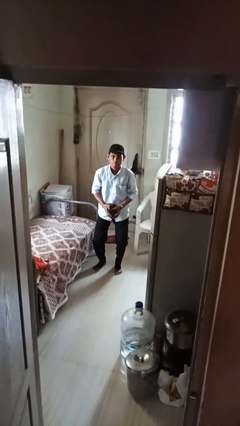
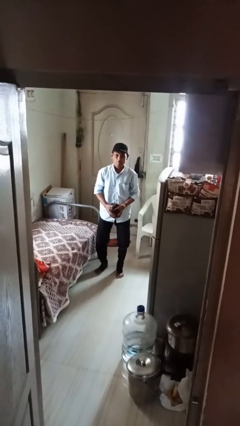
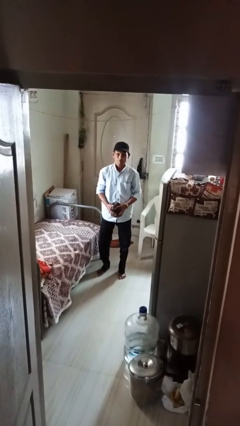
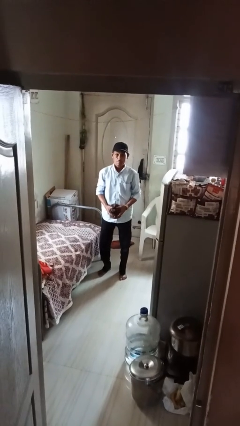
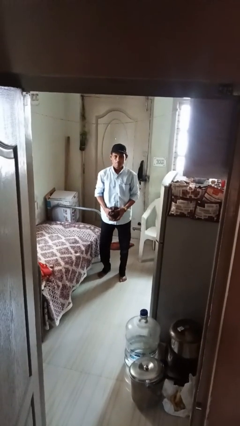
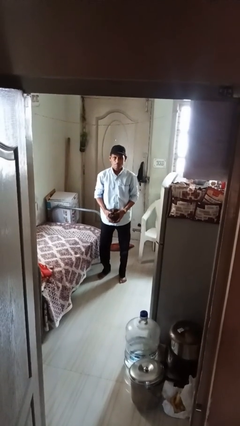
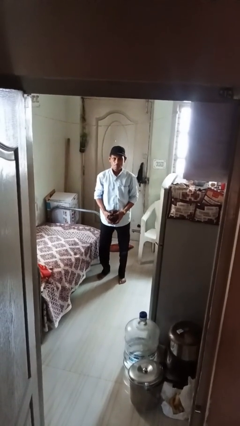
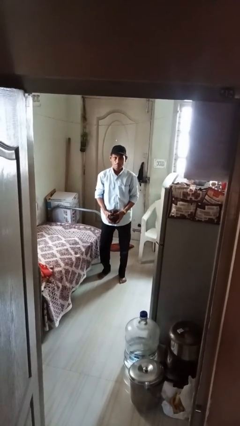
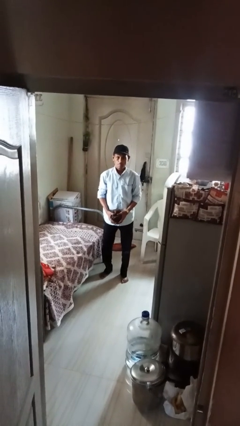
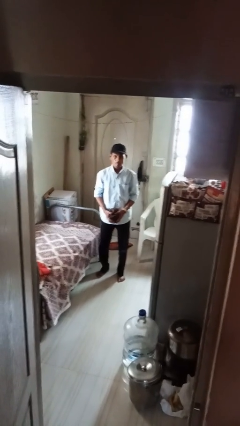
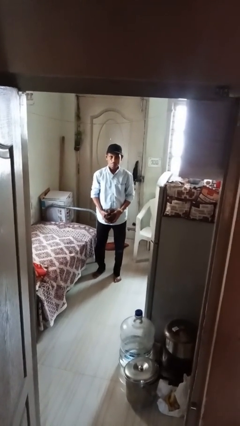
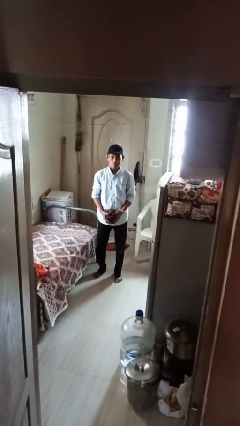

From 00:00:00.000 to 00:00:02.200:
person picks up object from floor

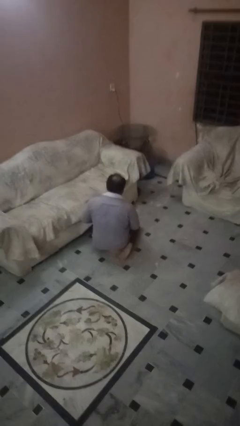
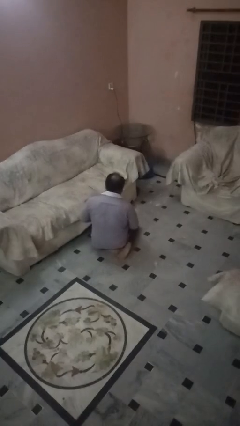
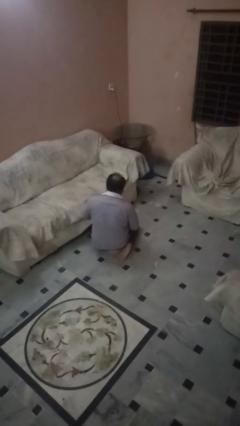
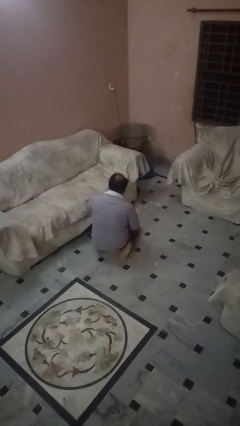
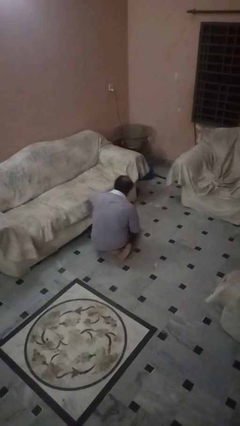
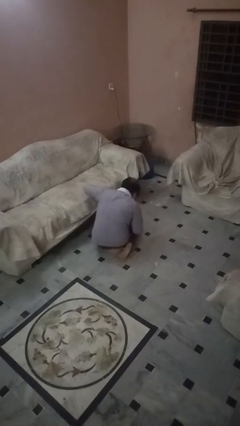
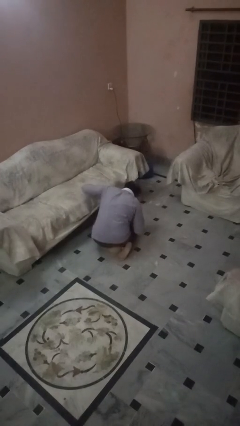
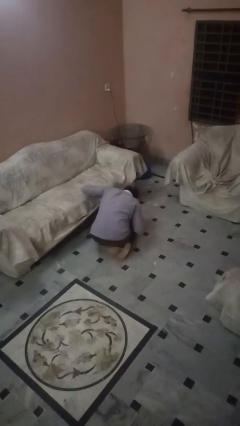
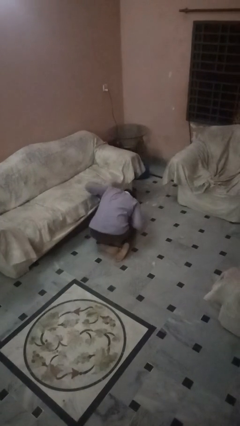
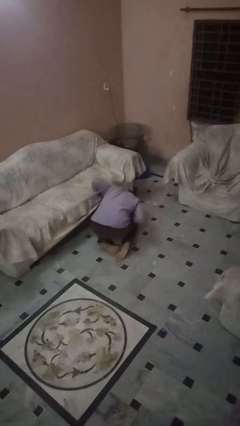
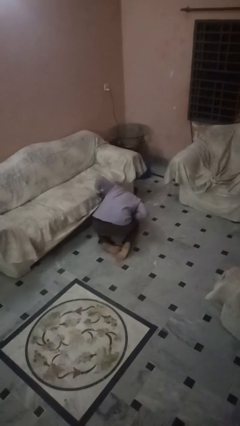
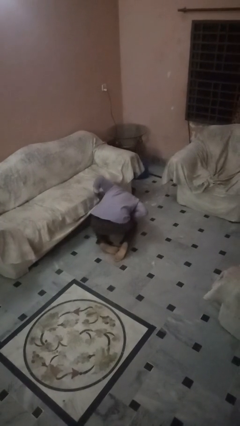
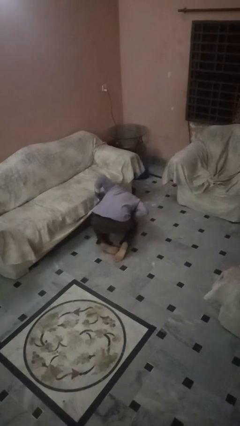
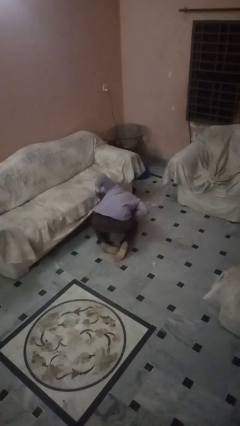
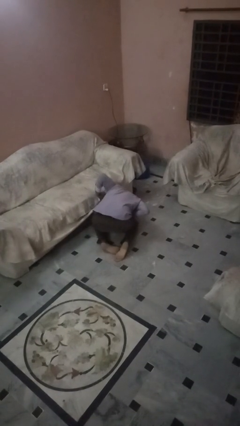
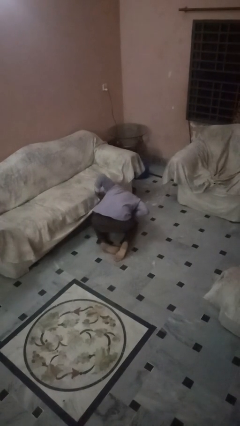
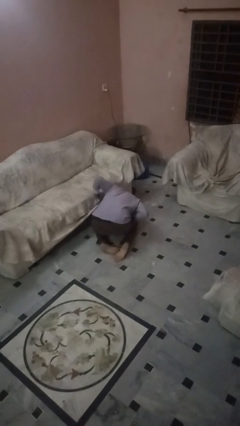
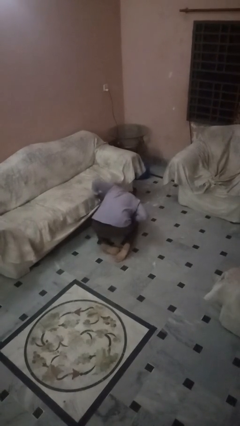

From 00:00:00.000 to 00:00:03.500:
person searches under couch

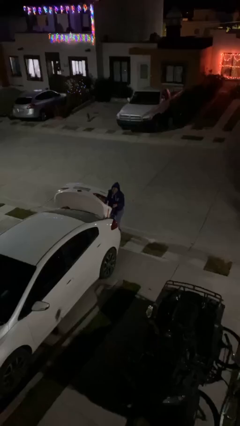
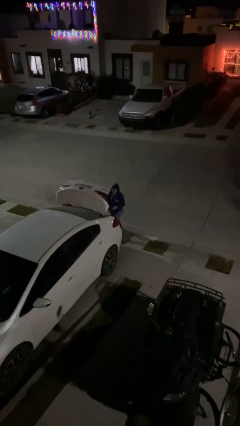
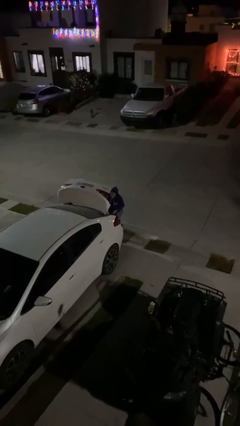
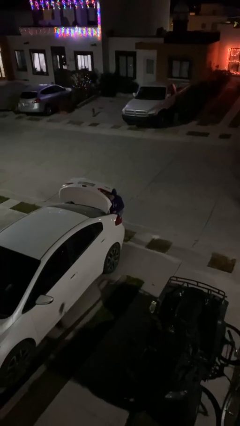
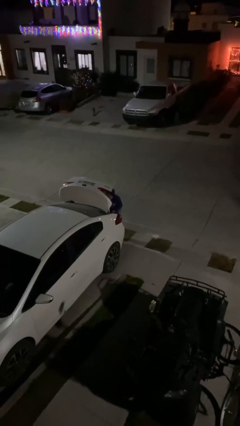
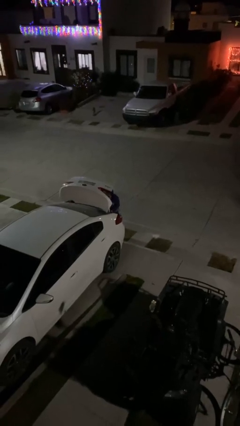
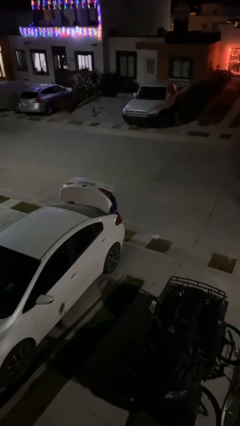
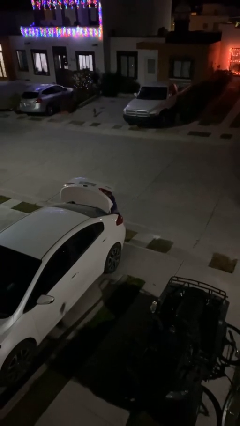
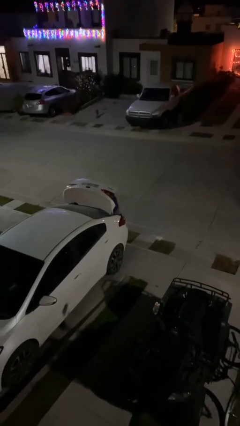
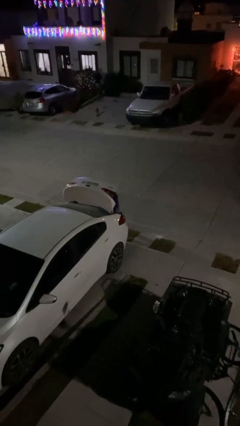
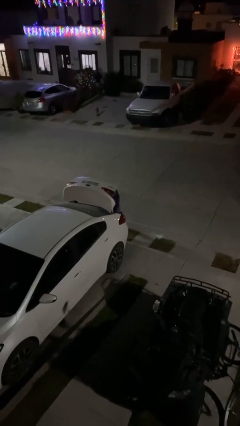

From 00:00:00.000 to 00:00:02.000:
person loads car

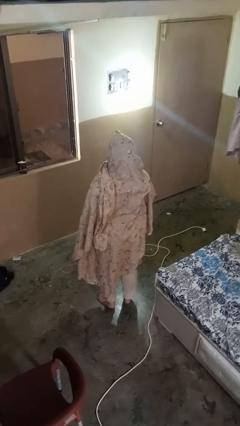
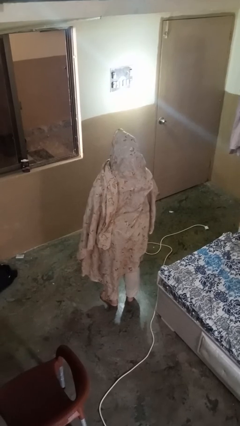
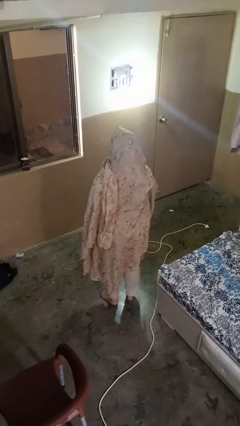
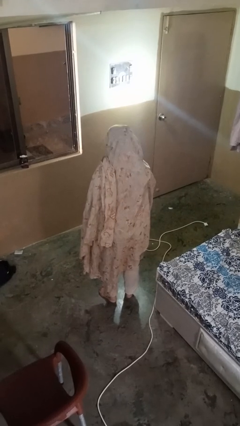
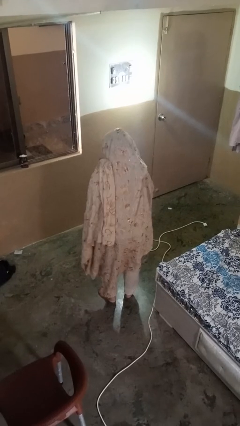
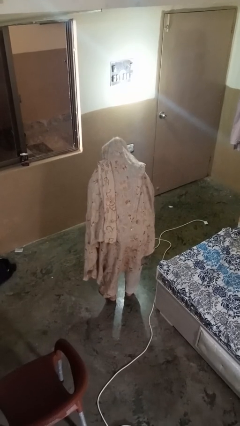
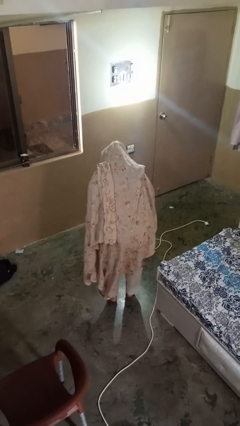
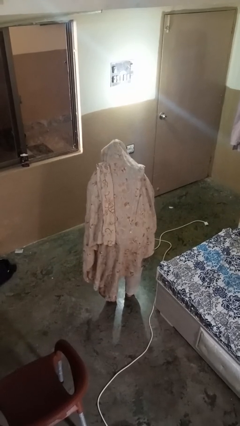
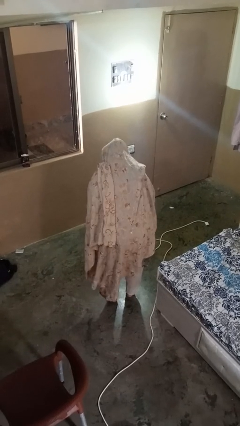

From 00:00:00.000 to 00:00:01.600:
person bows

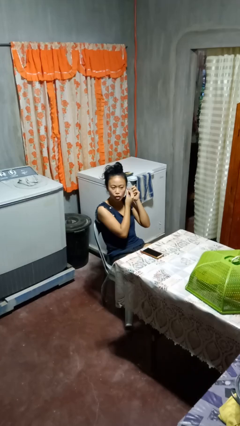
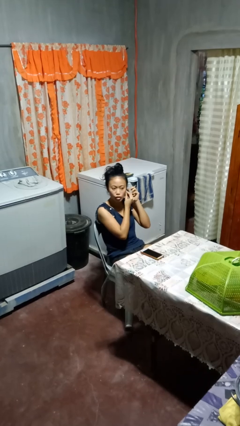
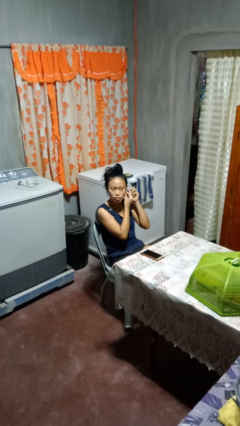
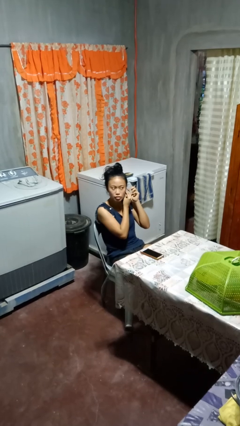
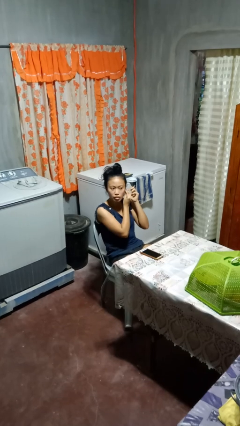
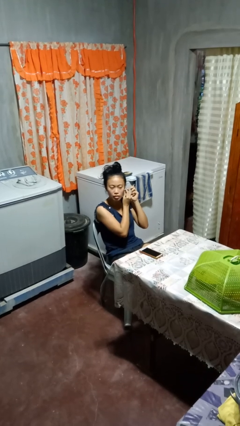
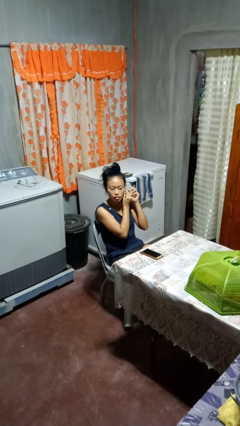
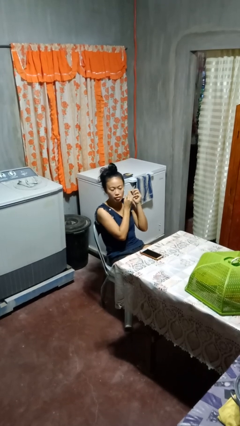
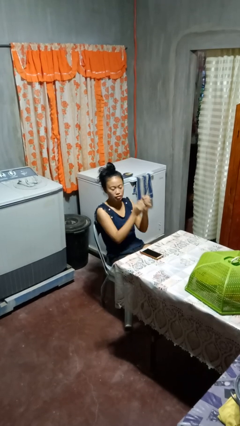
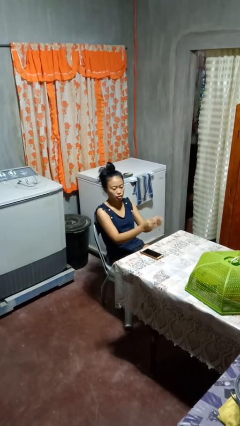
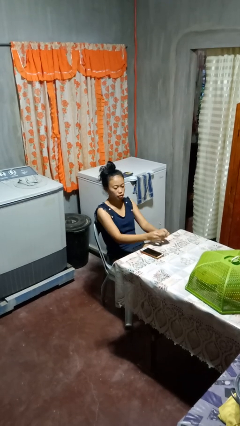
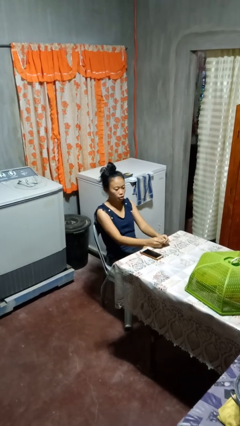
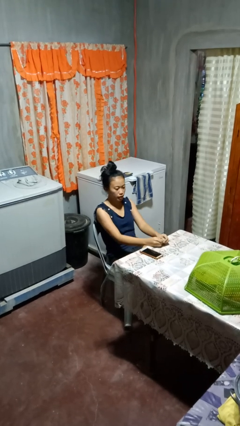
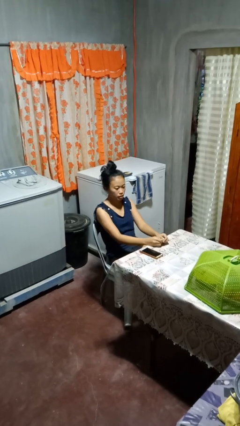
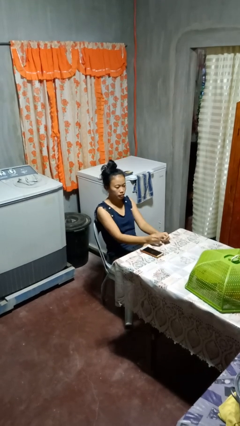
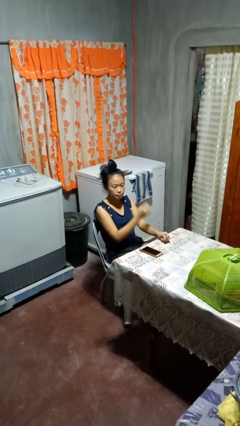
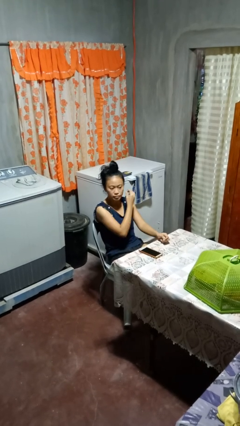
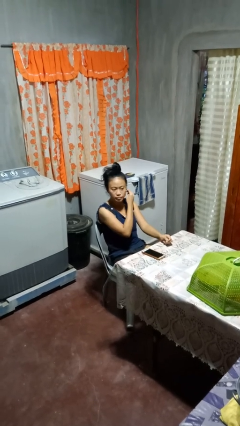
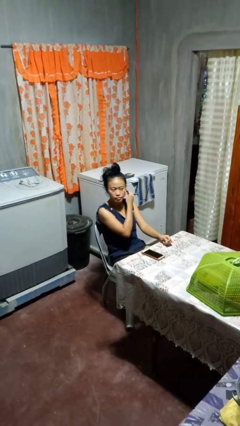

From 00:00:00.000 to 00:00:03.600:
person puts on earrings

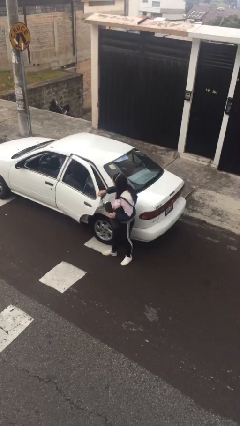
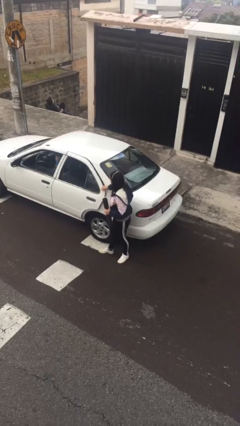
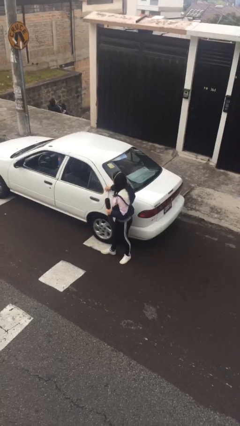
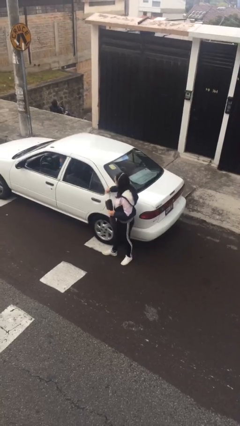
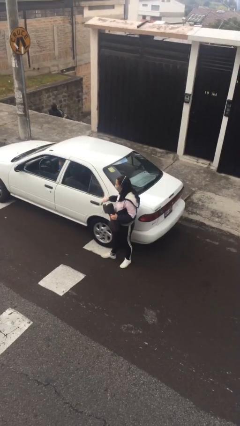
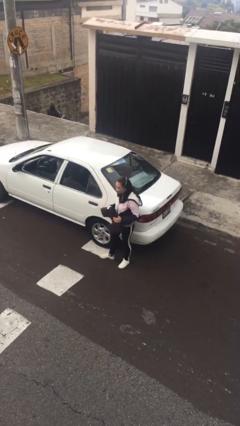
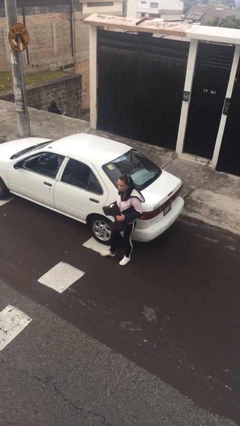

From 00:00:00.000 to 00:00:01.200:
person closes car door

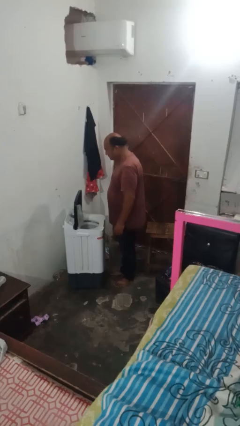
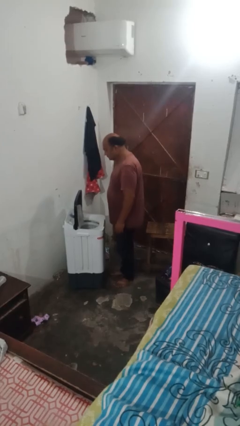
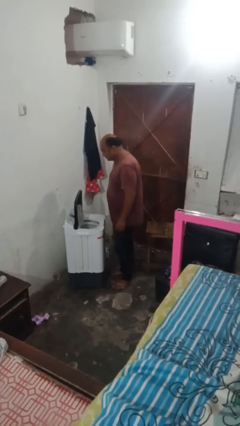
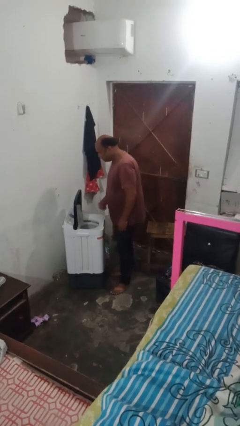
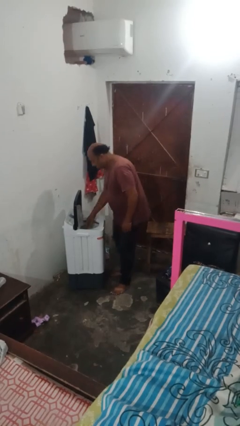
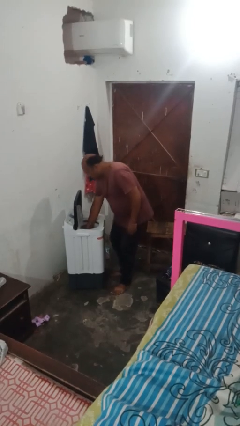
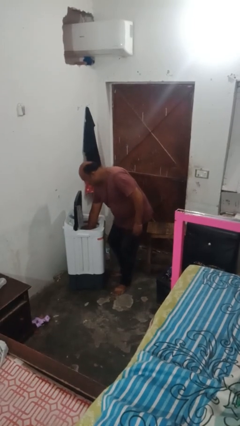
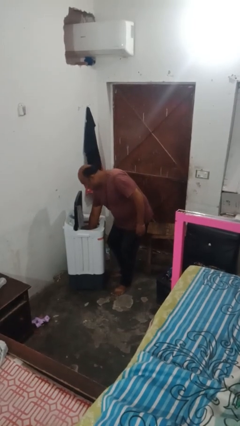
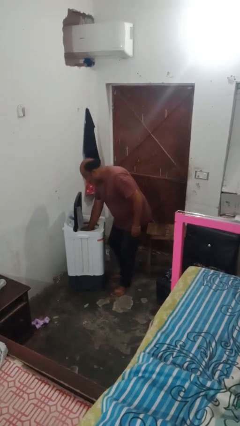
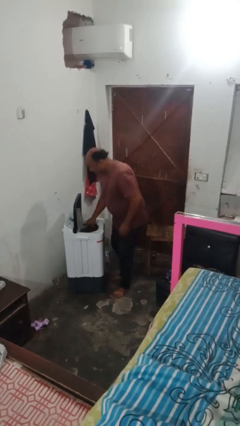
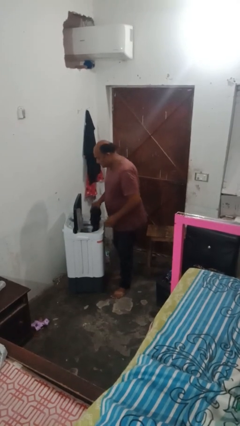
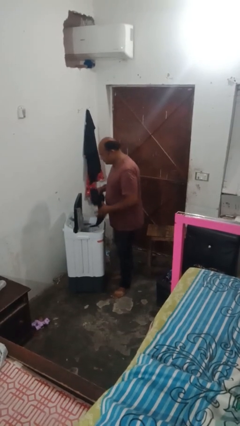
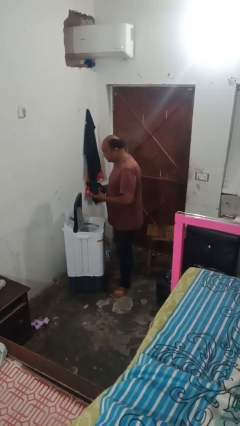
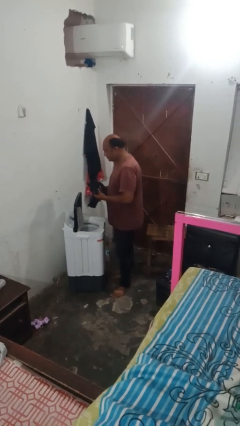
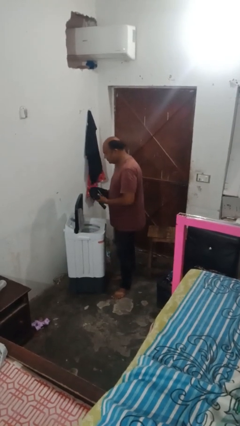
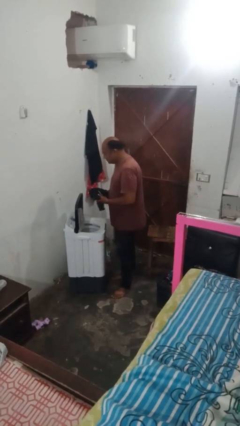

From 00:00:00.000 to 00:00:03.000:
person unloads clotheswasher
